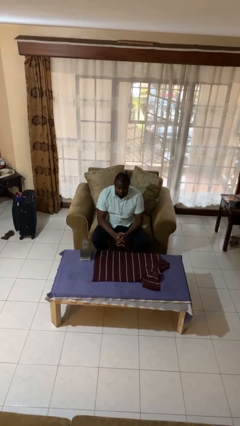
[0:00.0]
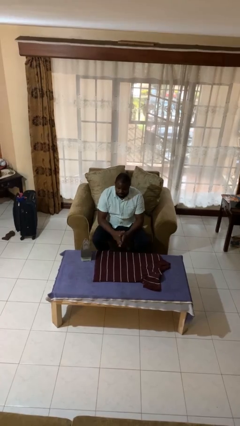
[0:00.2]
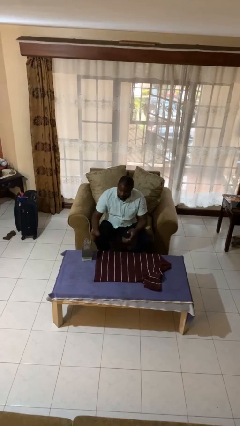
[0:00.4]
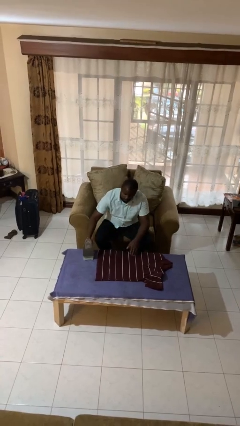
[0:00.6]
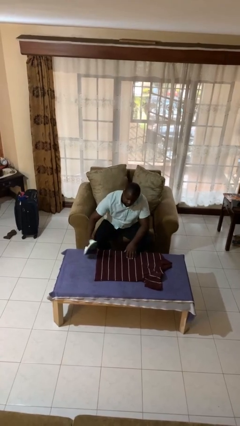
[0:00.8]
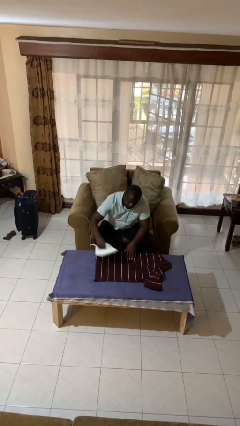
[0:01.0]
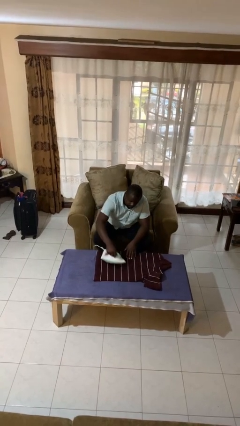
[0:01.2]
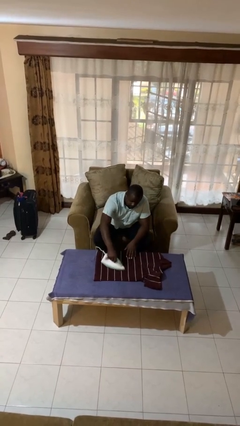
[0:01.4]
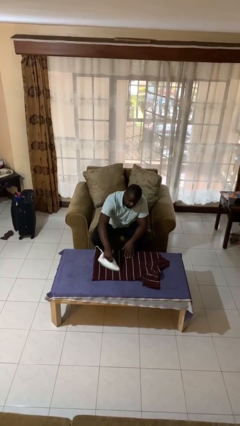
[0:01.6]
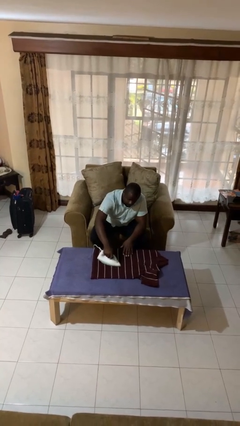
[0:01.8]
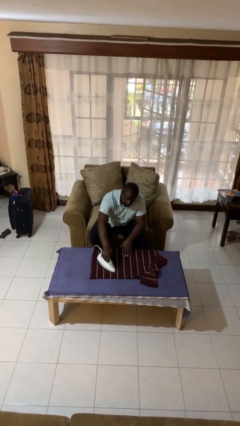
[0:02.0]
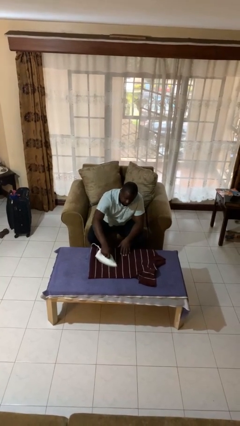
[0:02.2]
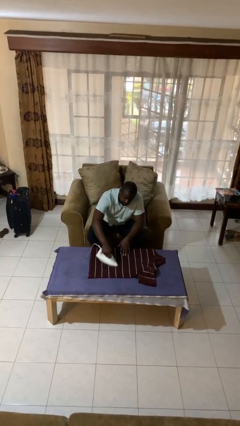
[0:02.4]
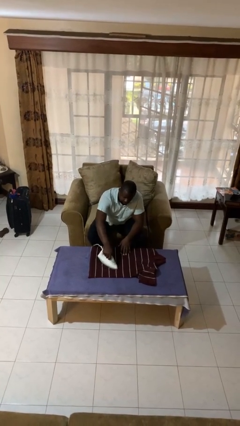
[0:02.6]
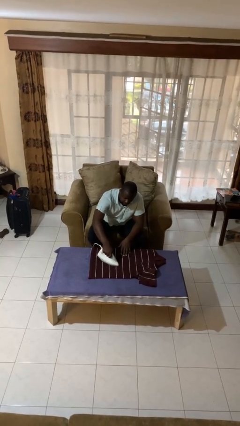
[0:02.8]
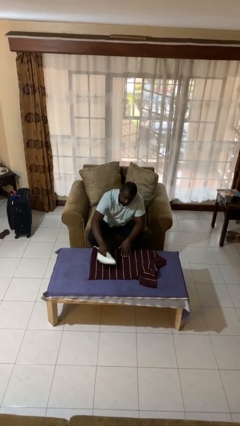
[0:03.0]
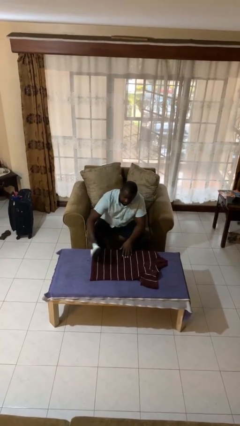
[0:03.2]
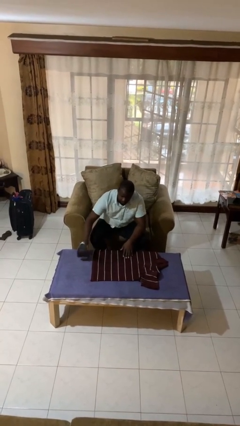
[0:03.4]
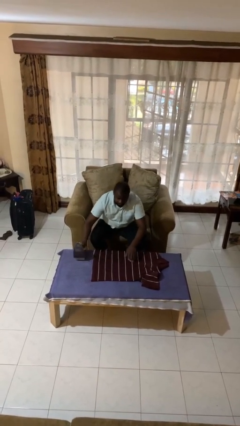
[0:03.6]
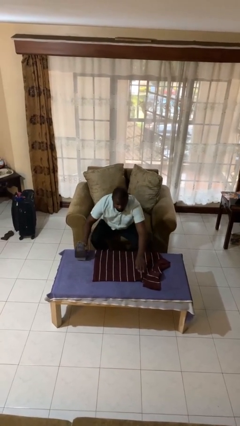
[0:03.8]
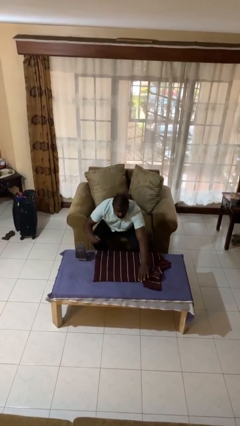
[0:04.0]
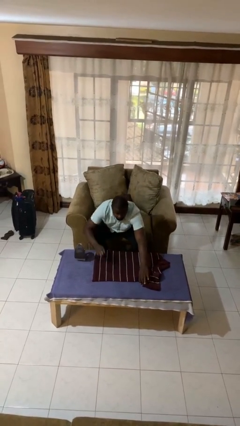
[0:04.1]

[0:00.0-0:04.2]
person irons clothes

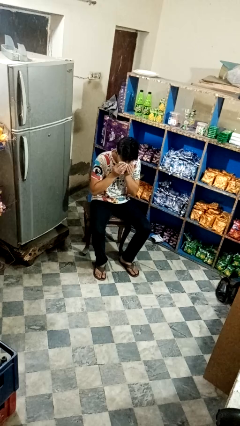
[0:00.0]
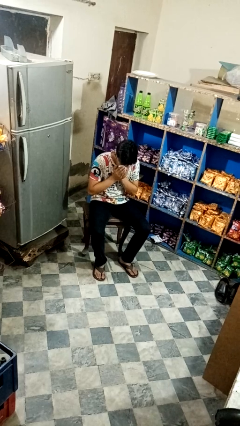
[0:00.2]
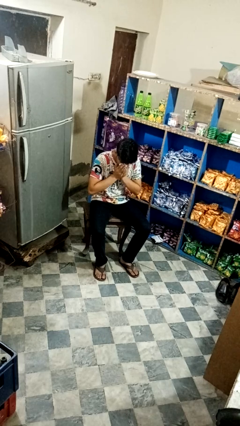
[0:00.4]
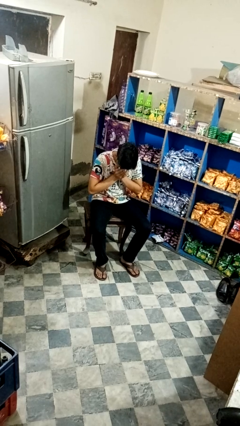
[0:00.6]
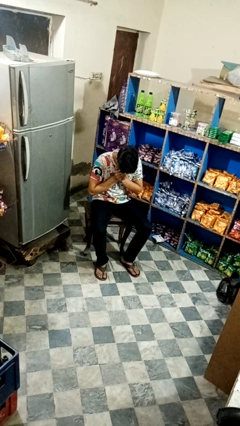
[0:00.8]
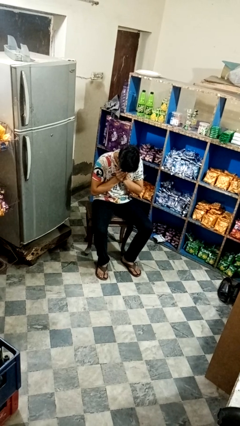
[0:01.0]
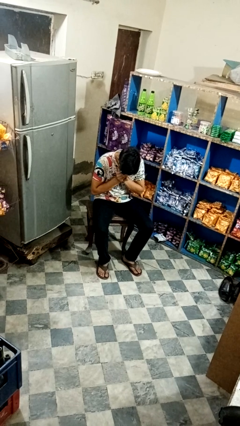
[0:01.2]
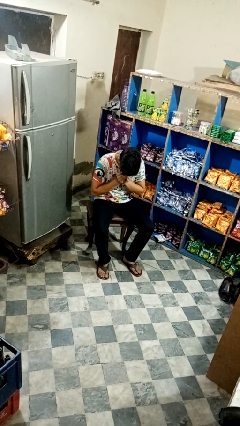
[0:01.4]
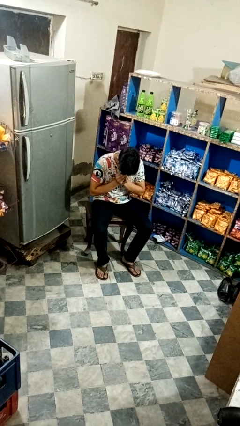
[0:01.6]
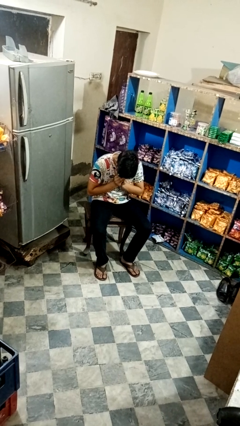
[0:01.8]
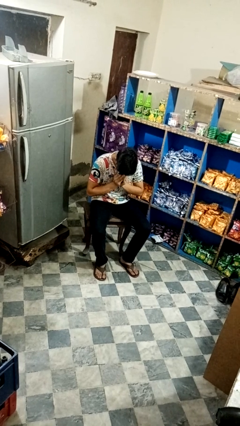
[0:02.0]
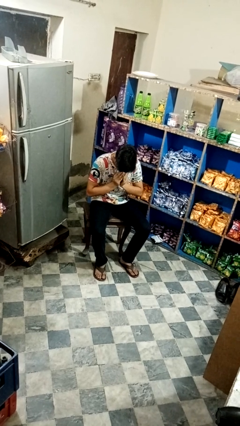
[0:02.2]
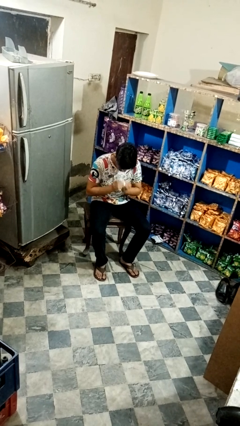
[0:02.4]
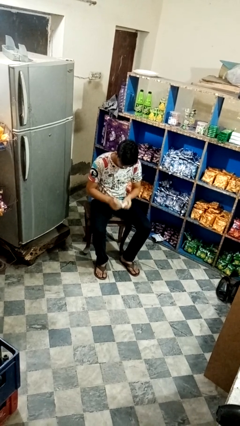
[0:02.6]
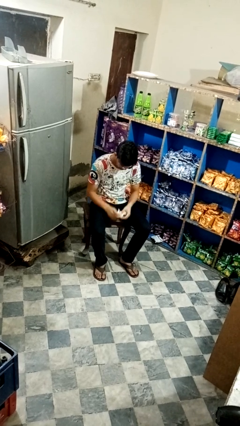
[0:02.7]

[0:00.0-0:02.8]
person blows nose

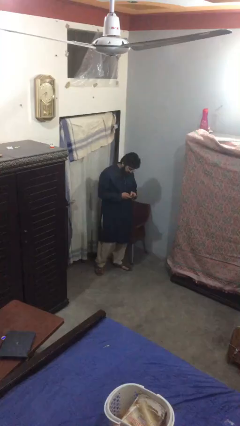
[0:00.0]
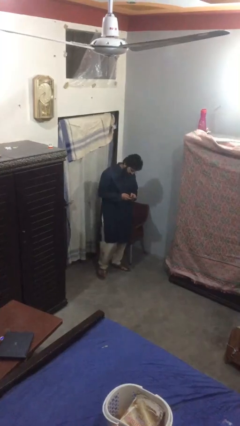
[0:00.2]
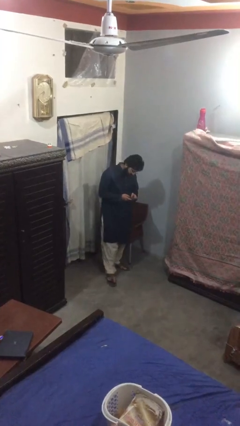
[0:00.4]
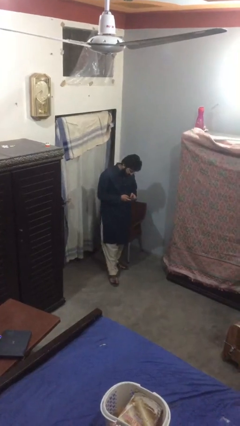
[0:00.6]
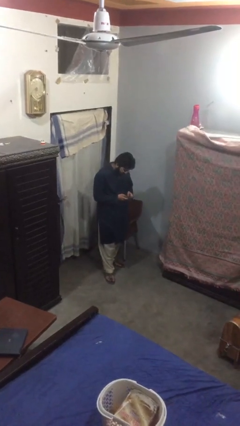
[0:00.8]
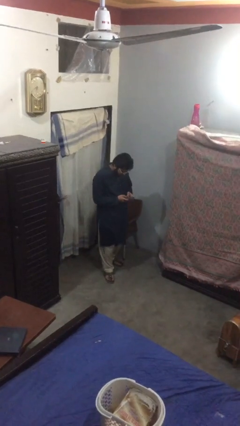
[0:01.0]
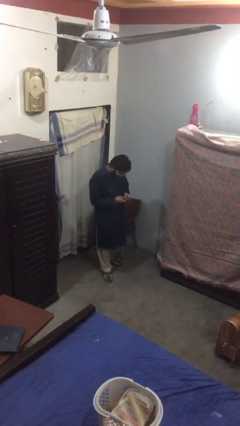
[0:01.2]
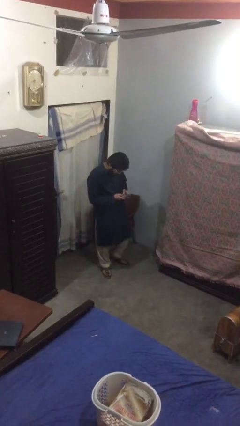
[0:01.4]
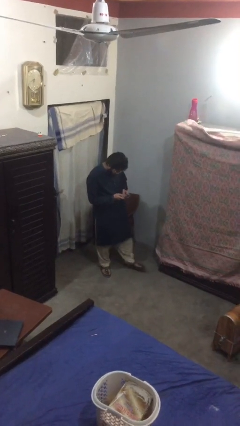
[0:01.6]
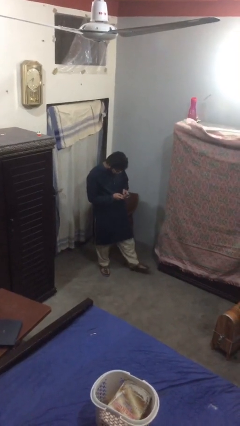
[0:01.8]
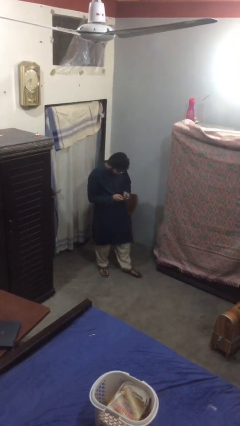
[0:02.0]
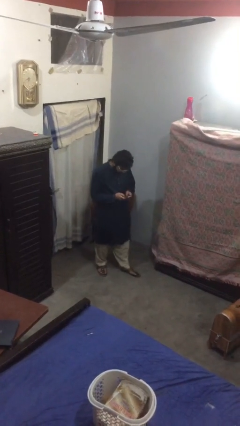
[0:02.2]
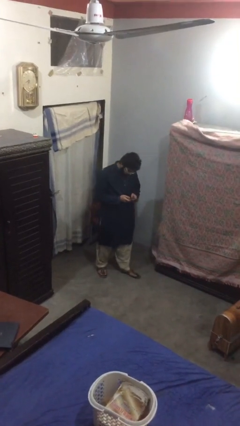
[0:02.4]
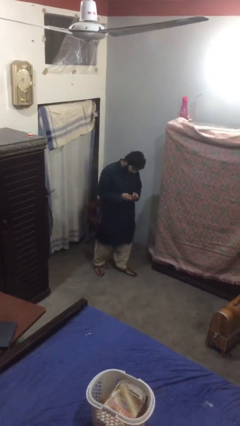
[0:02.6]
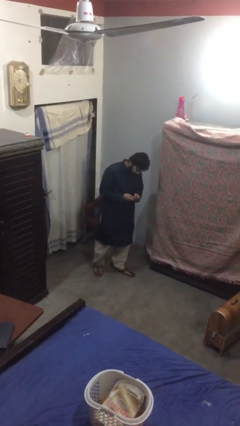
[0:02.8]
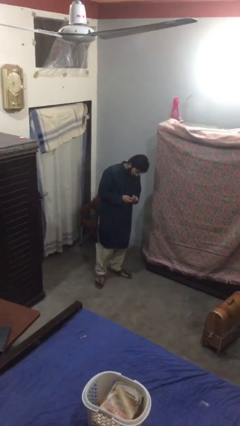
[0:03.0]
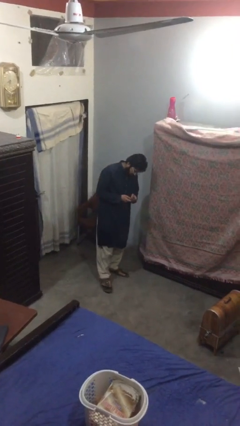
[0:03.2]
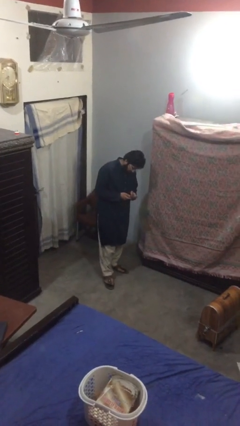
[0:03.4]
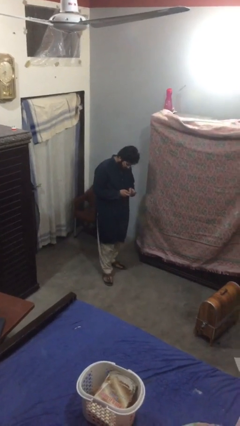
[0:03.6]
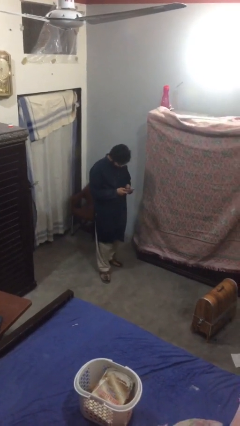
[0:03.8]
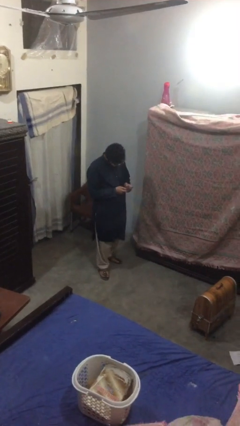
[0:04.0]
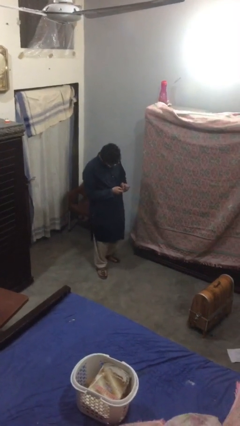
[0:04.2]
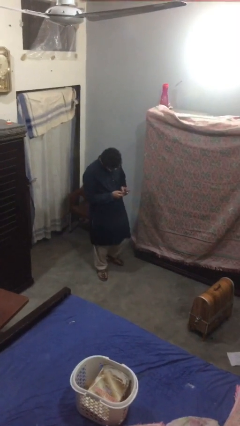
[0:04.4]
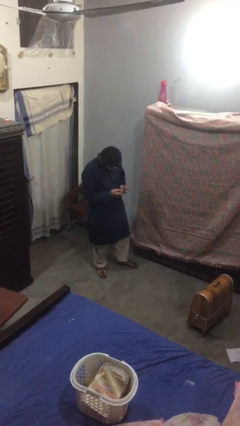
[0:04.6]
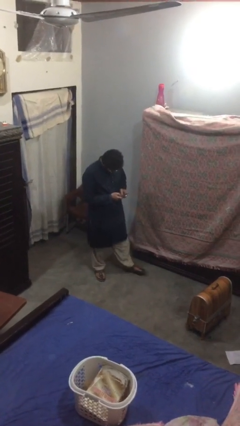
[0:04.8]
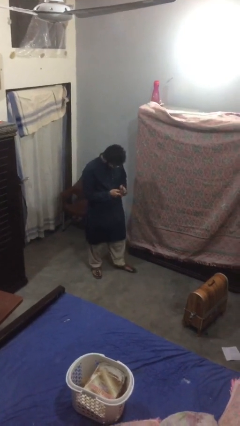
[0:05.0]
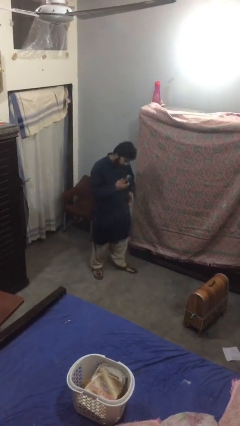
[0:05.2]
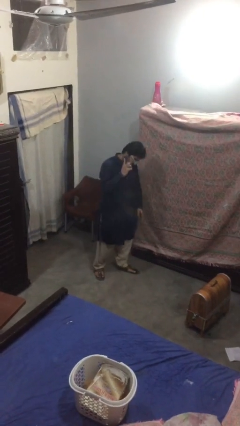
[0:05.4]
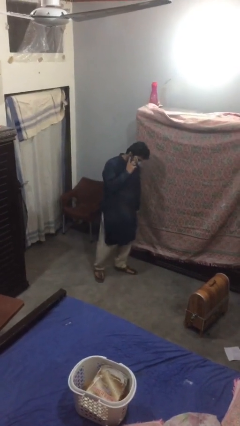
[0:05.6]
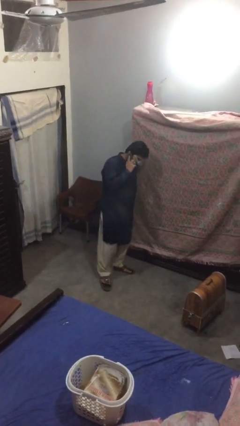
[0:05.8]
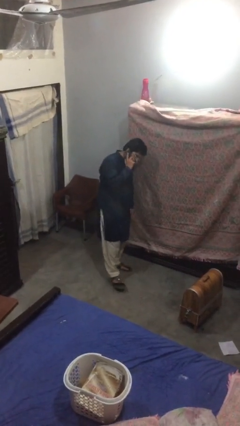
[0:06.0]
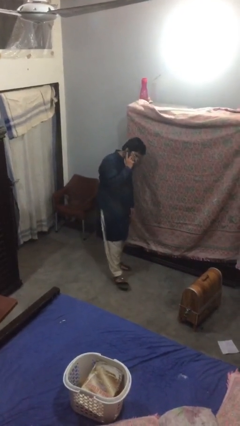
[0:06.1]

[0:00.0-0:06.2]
person texts on phone

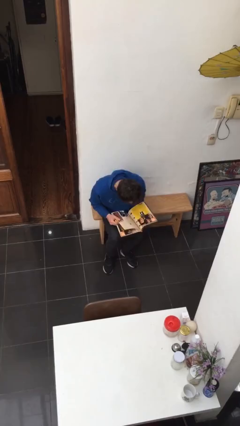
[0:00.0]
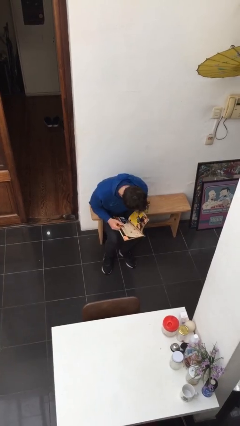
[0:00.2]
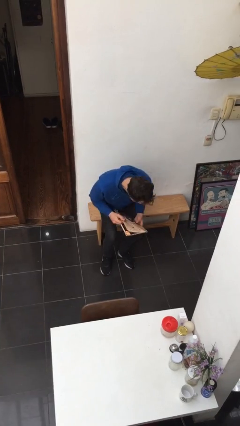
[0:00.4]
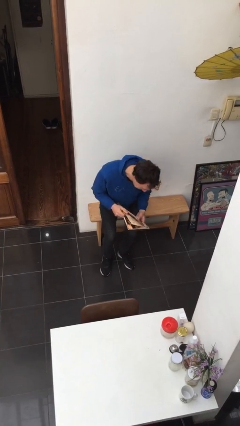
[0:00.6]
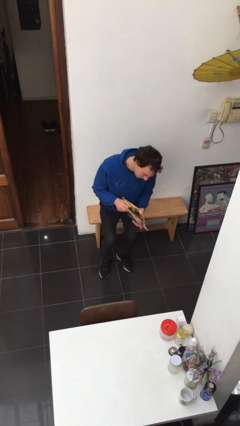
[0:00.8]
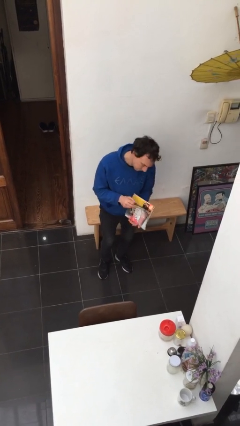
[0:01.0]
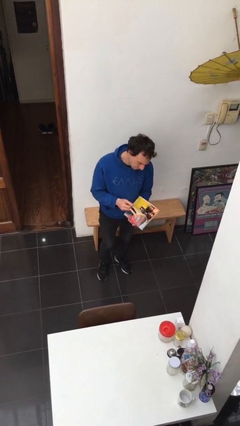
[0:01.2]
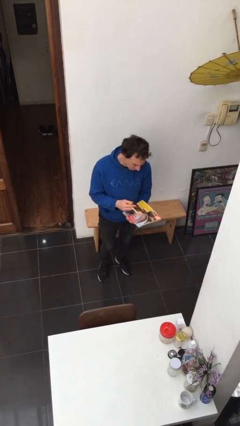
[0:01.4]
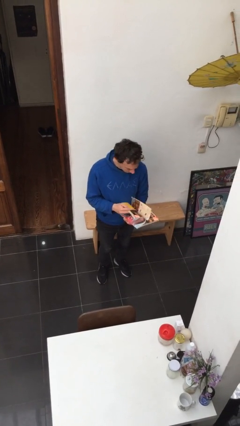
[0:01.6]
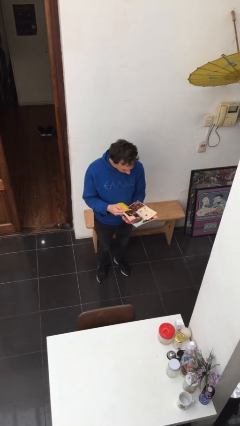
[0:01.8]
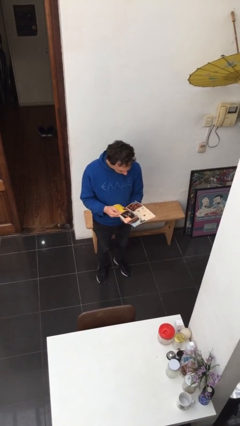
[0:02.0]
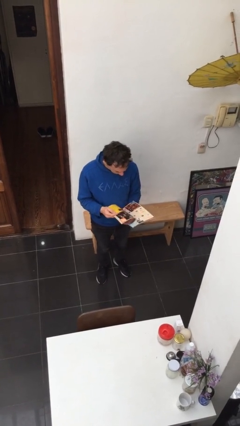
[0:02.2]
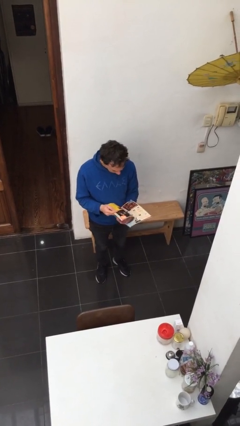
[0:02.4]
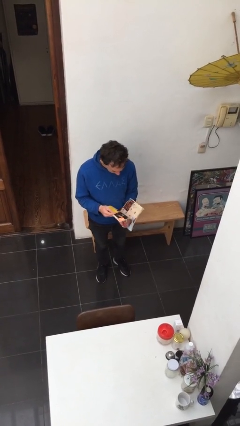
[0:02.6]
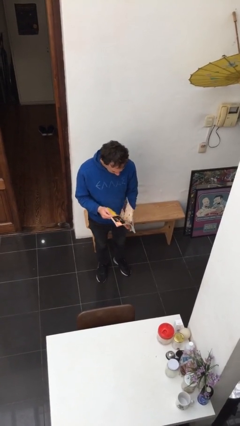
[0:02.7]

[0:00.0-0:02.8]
person stands up

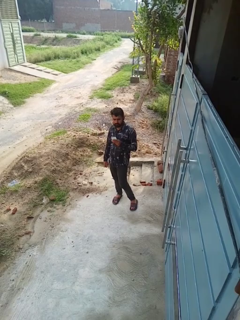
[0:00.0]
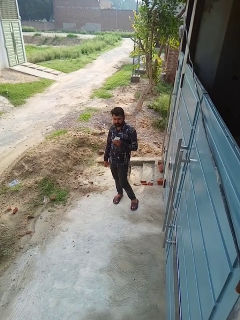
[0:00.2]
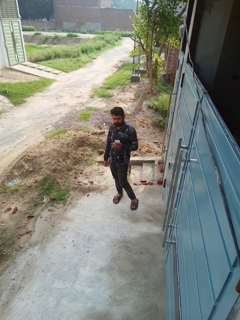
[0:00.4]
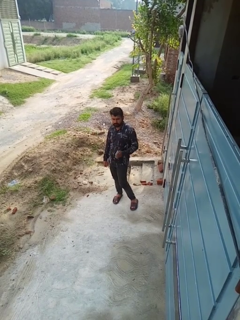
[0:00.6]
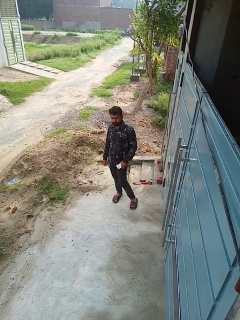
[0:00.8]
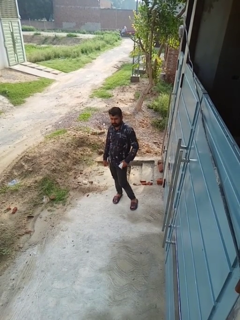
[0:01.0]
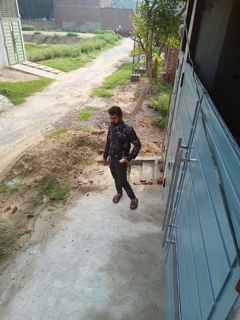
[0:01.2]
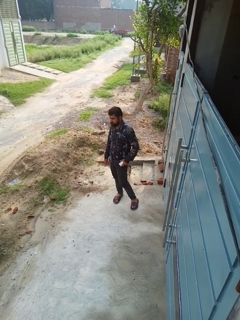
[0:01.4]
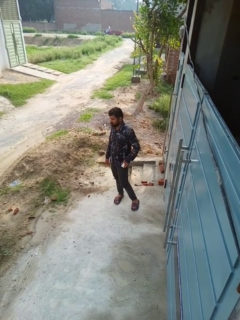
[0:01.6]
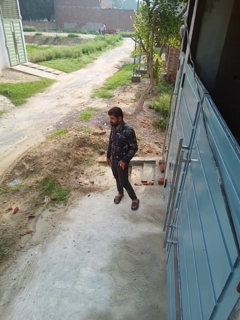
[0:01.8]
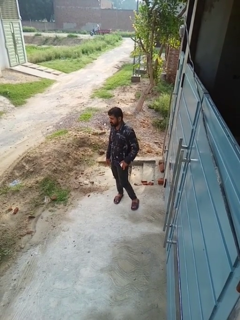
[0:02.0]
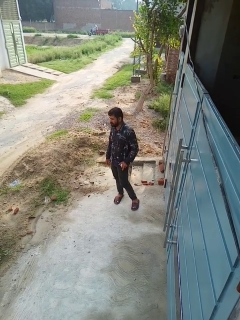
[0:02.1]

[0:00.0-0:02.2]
person puts phone into pocket

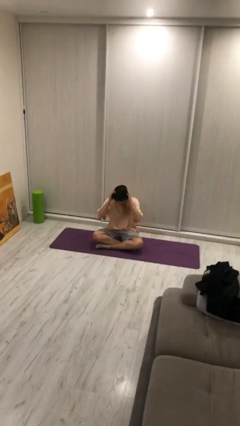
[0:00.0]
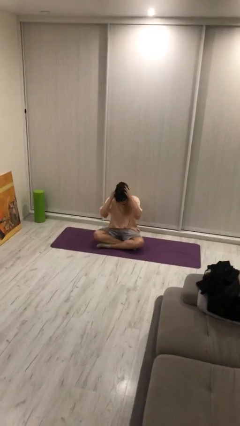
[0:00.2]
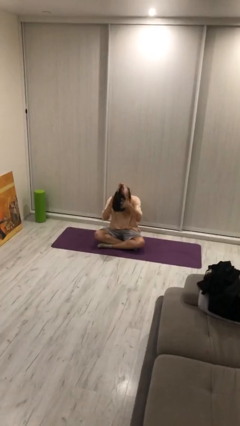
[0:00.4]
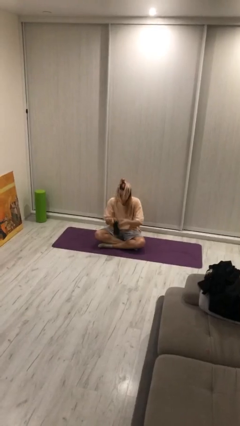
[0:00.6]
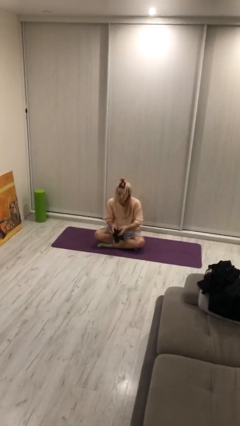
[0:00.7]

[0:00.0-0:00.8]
person takes off hat
